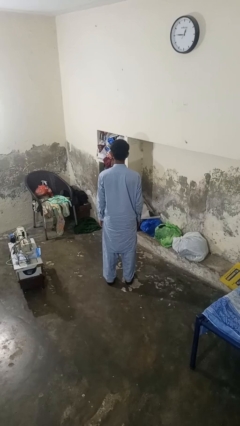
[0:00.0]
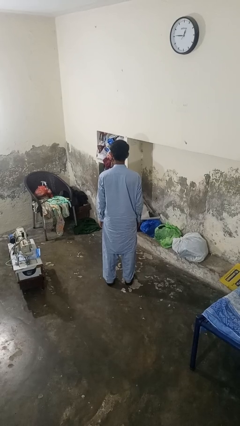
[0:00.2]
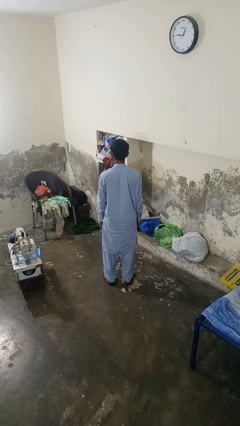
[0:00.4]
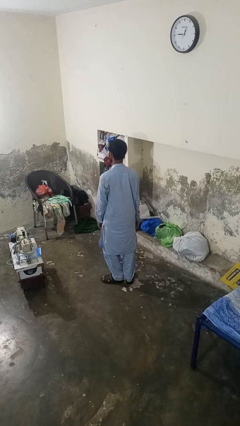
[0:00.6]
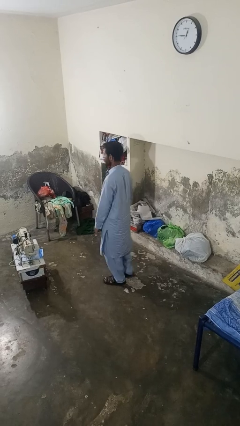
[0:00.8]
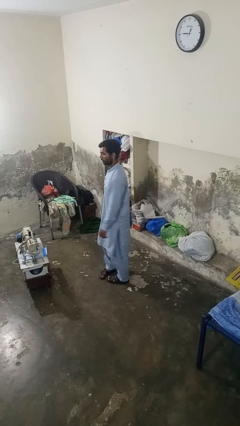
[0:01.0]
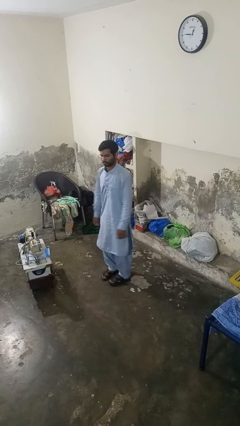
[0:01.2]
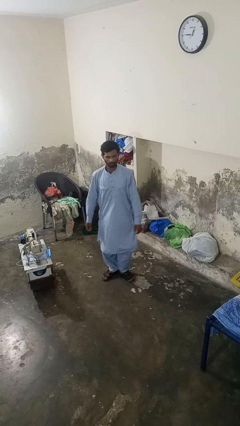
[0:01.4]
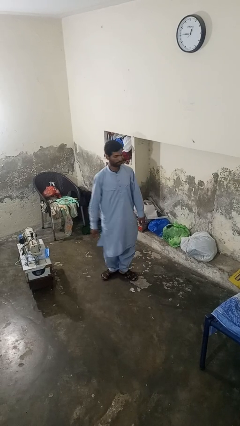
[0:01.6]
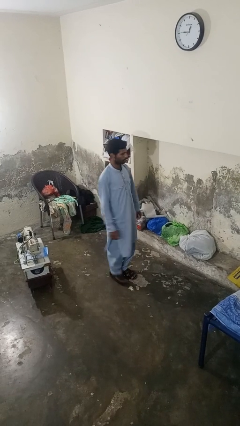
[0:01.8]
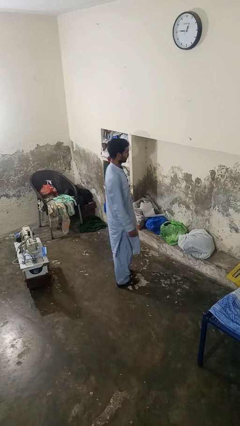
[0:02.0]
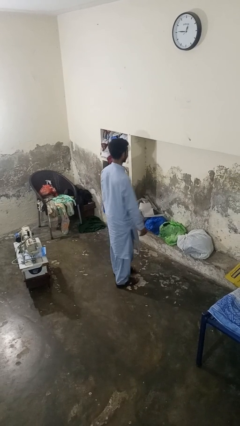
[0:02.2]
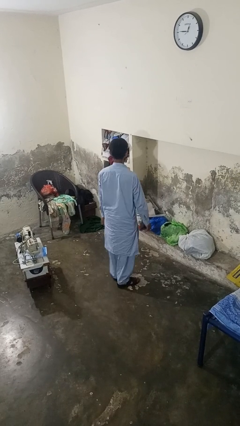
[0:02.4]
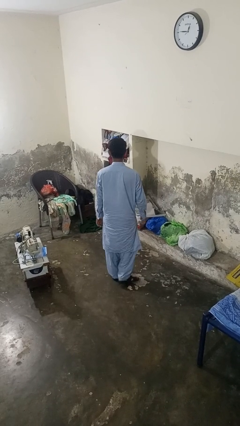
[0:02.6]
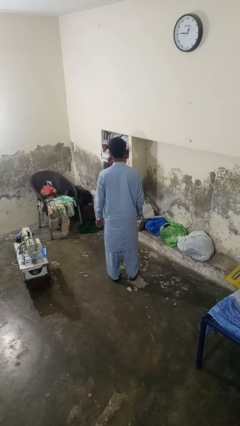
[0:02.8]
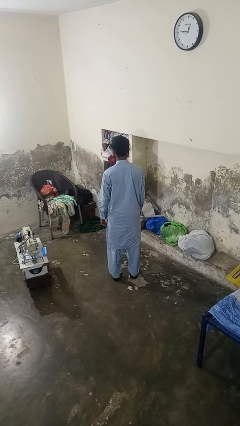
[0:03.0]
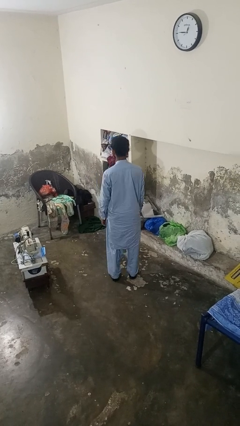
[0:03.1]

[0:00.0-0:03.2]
person twirls

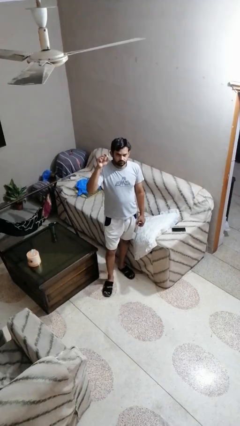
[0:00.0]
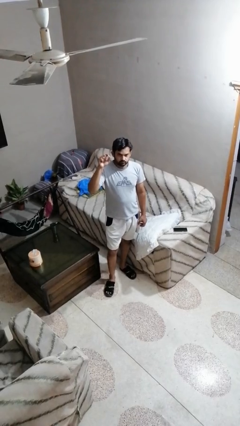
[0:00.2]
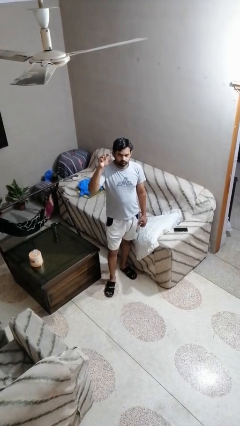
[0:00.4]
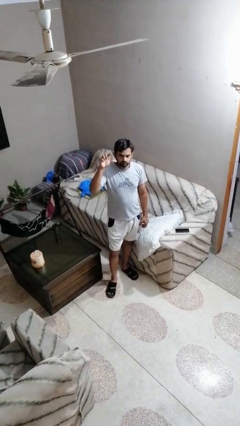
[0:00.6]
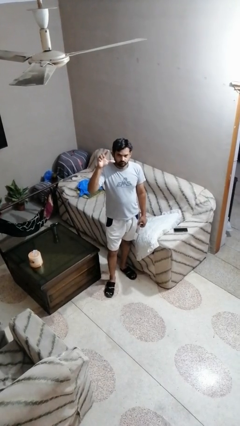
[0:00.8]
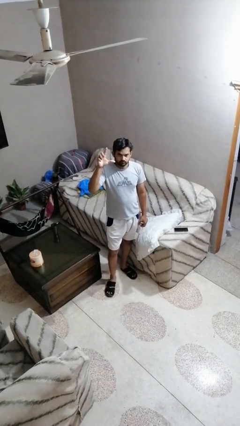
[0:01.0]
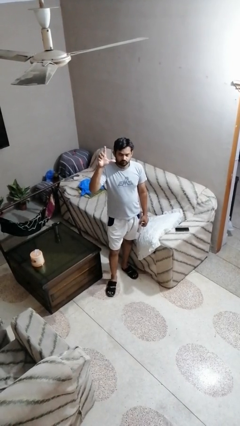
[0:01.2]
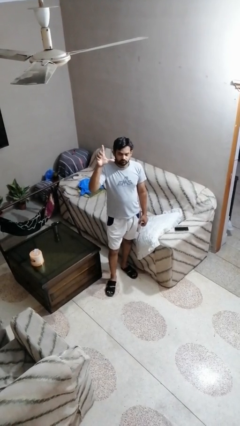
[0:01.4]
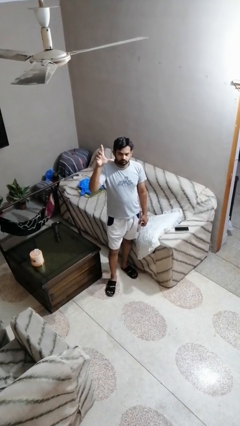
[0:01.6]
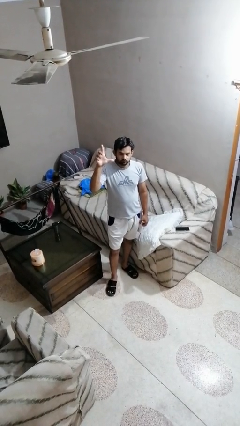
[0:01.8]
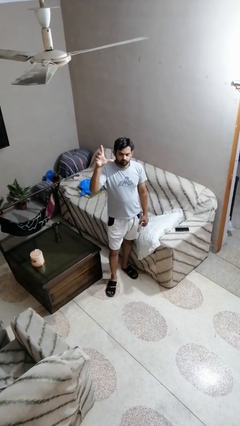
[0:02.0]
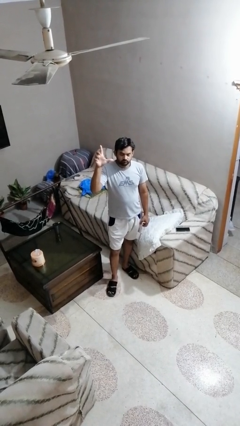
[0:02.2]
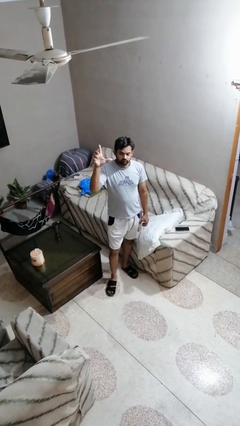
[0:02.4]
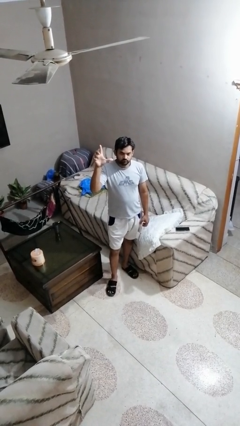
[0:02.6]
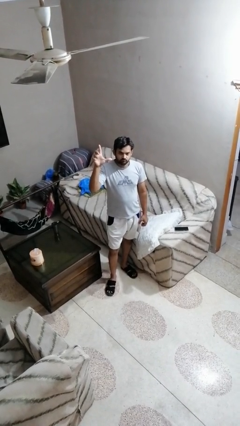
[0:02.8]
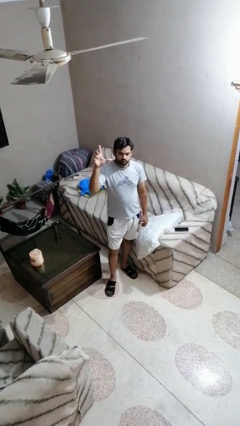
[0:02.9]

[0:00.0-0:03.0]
person gestures zoom out

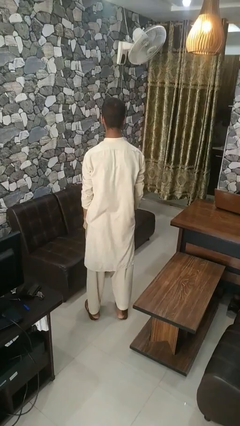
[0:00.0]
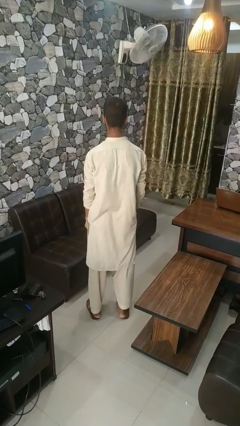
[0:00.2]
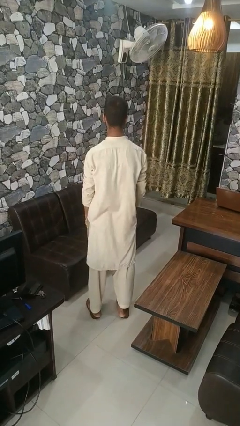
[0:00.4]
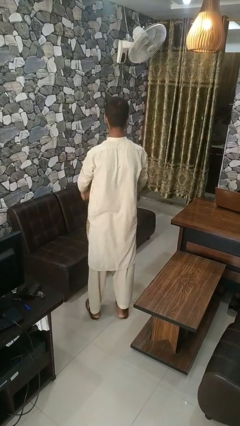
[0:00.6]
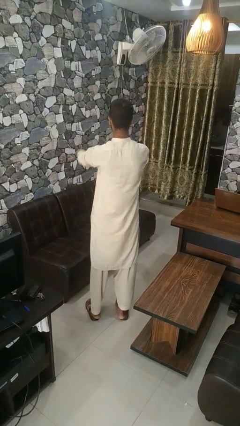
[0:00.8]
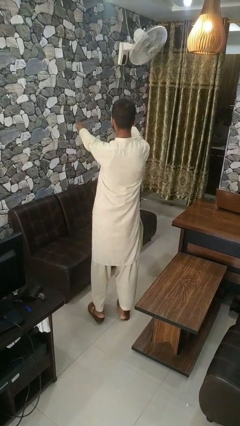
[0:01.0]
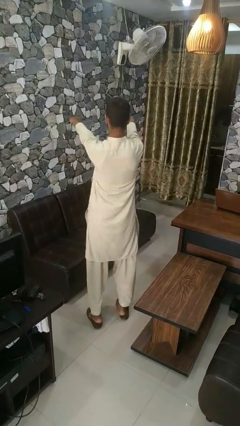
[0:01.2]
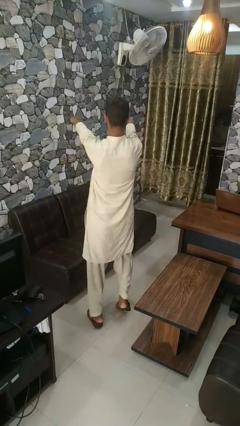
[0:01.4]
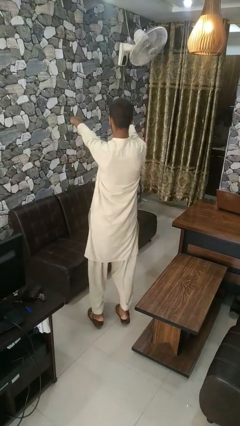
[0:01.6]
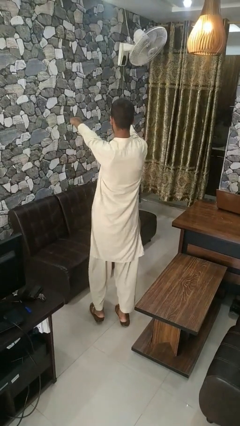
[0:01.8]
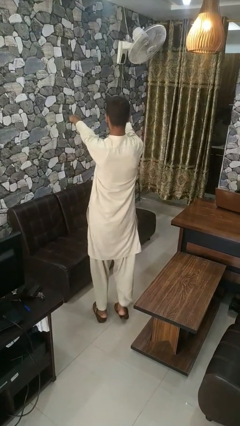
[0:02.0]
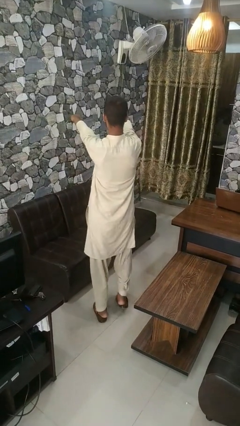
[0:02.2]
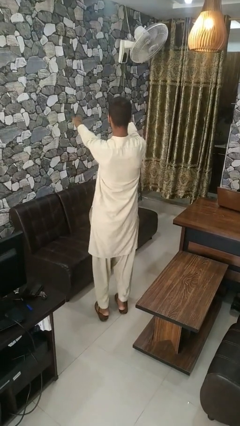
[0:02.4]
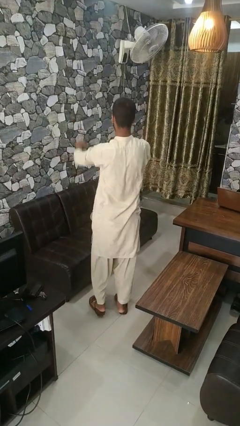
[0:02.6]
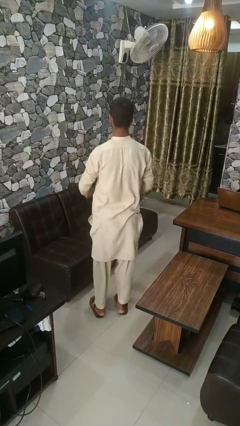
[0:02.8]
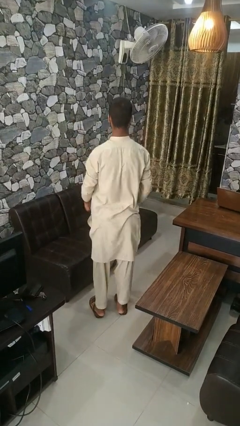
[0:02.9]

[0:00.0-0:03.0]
person walks tiptoe

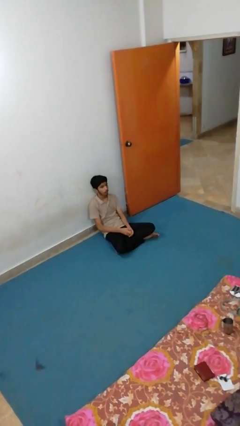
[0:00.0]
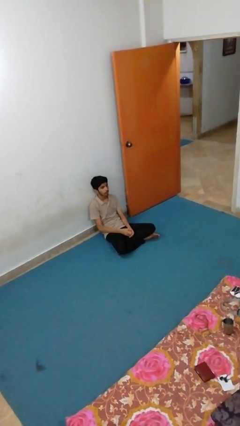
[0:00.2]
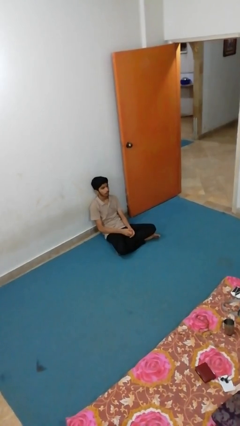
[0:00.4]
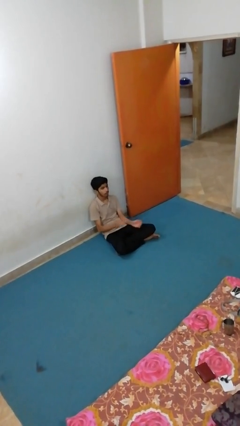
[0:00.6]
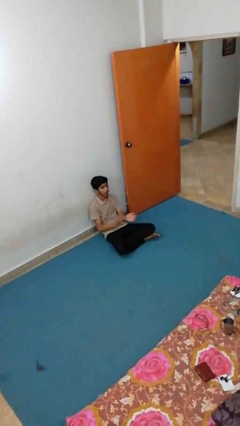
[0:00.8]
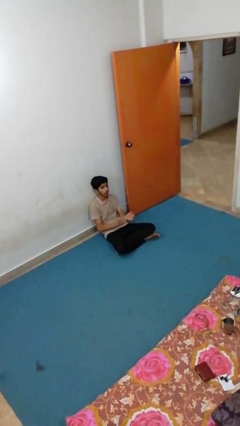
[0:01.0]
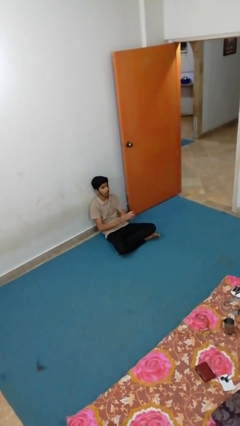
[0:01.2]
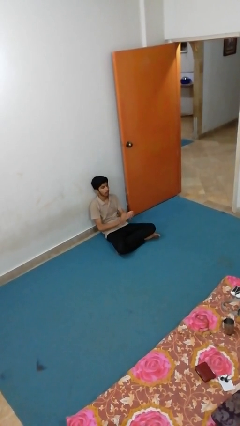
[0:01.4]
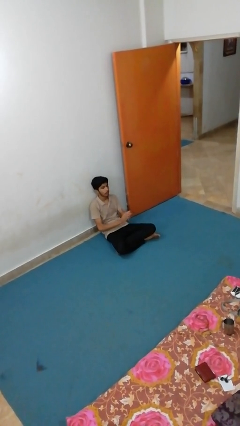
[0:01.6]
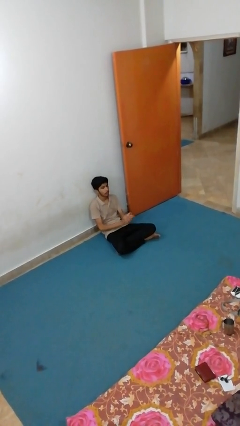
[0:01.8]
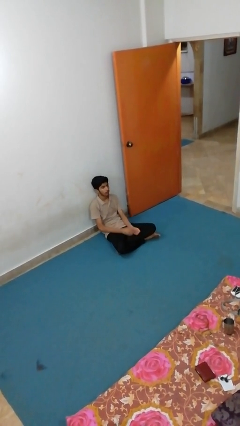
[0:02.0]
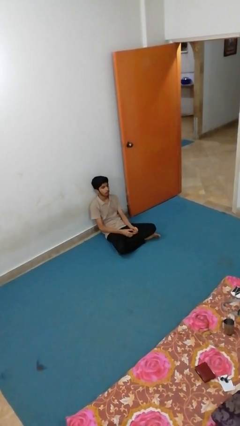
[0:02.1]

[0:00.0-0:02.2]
person claps hands

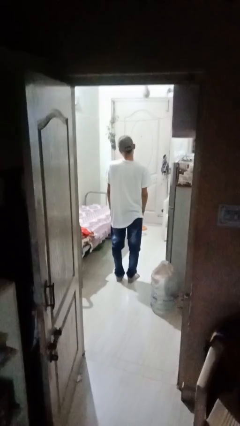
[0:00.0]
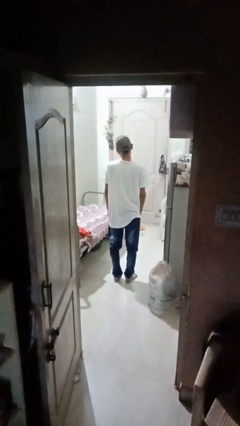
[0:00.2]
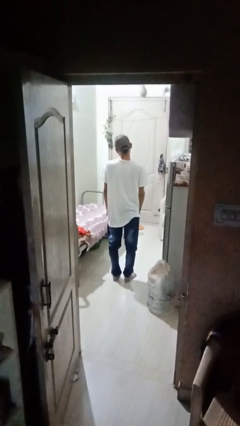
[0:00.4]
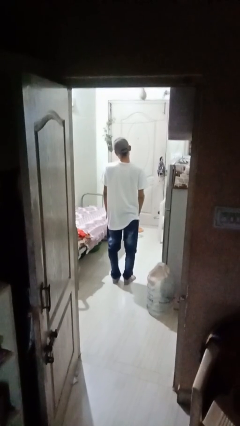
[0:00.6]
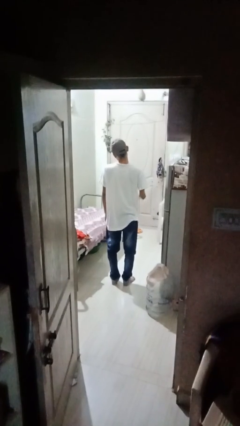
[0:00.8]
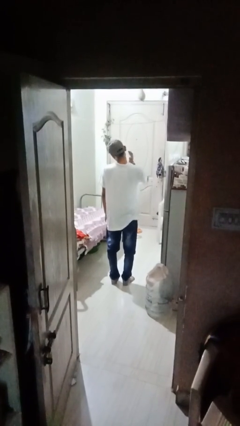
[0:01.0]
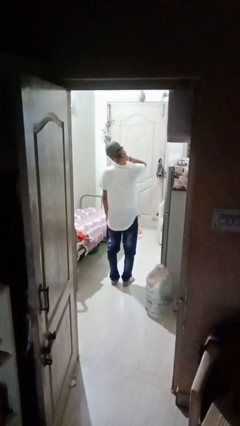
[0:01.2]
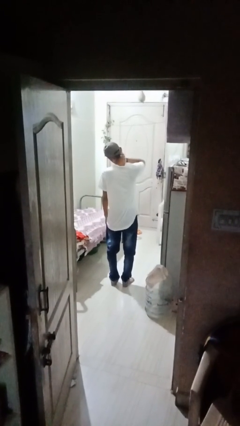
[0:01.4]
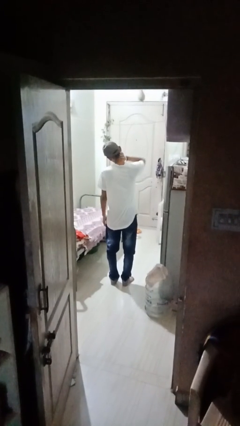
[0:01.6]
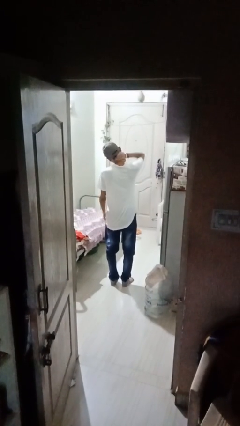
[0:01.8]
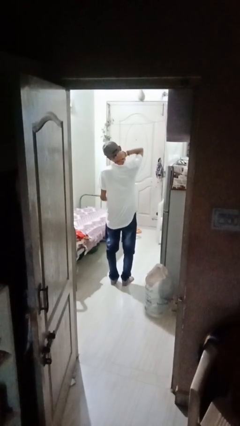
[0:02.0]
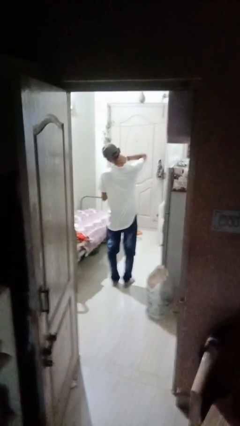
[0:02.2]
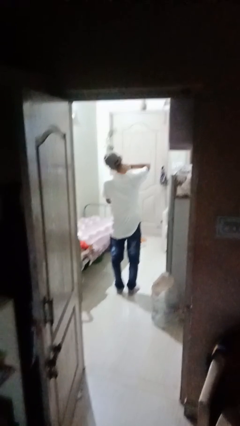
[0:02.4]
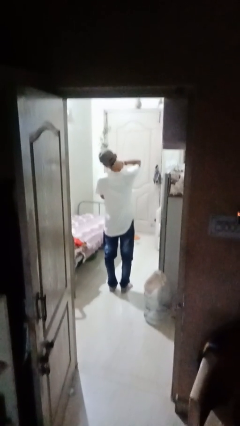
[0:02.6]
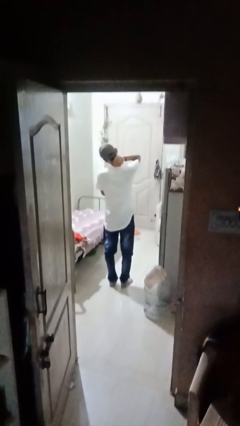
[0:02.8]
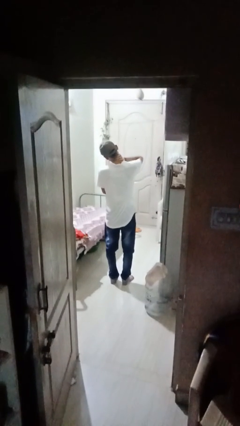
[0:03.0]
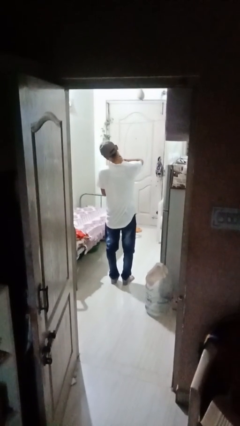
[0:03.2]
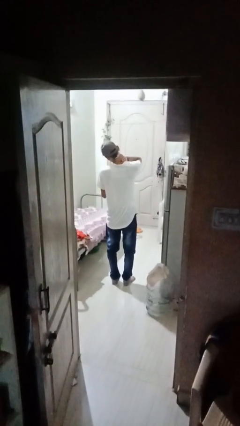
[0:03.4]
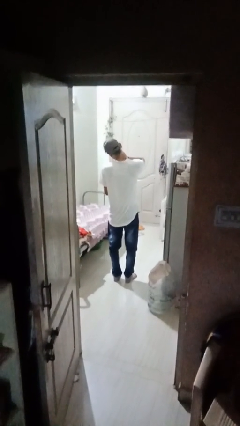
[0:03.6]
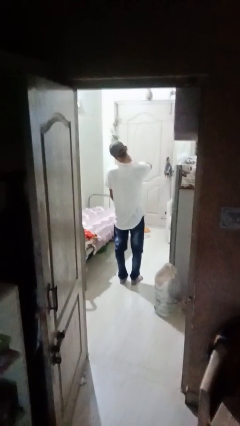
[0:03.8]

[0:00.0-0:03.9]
person rubs neck

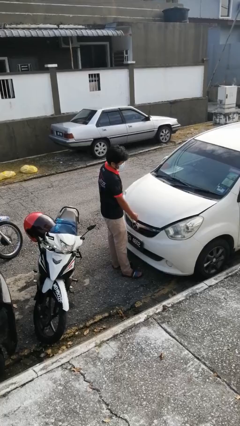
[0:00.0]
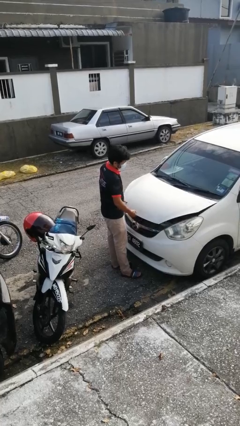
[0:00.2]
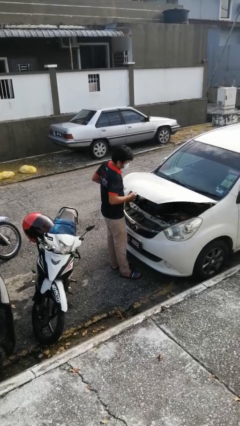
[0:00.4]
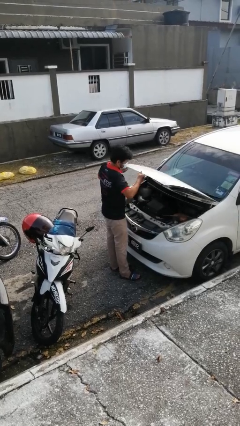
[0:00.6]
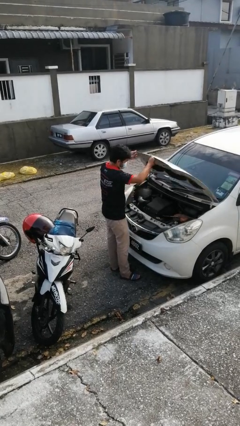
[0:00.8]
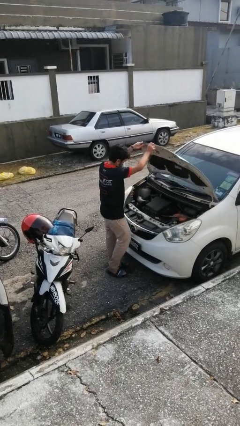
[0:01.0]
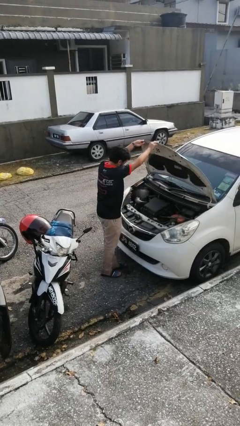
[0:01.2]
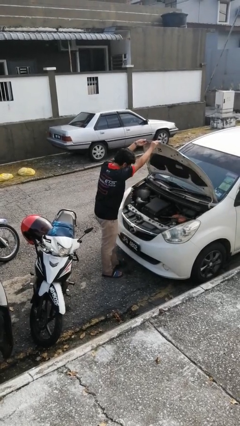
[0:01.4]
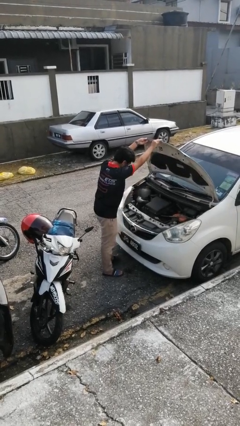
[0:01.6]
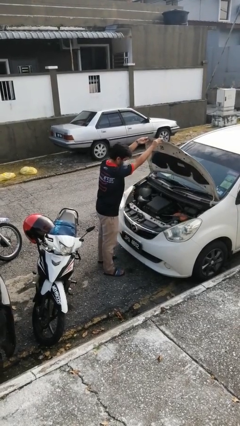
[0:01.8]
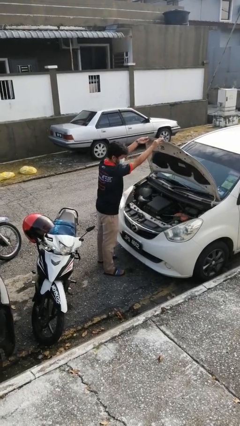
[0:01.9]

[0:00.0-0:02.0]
person opens car hood

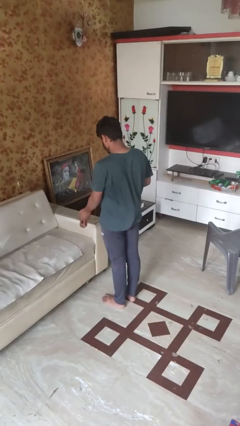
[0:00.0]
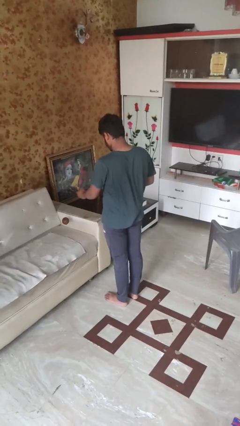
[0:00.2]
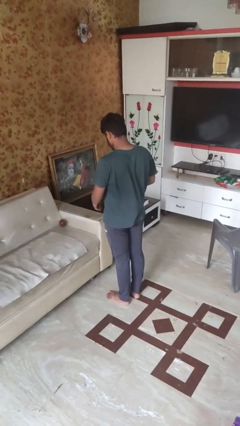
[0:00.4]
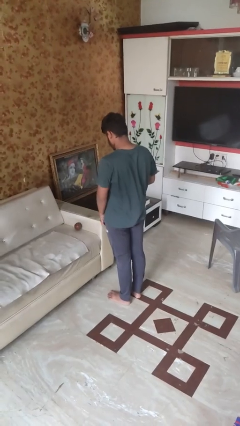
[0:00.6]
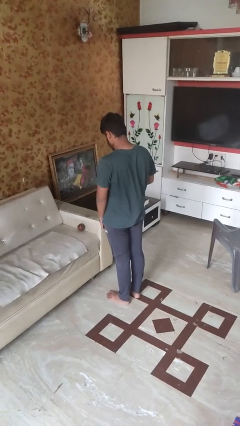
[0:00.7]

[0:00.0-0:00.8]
person throws object on bed
